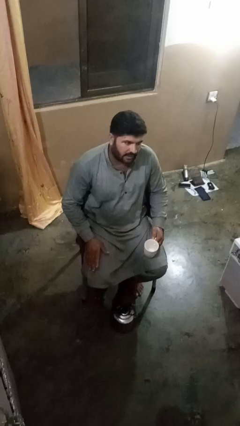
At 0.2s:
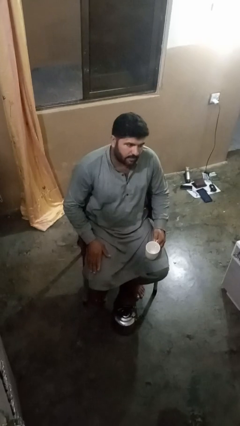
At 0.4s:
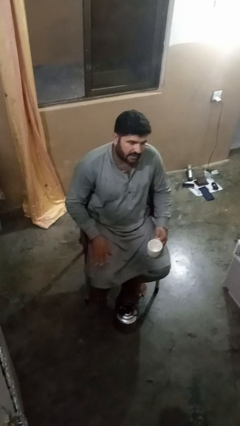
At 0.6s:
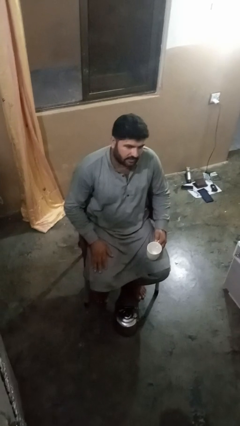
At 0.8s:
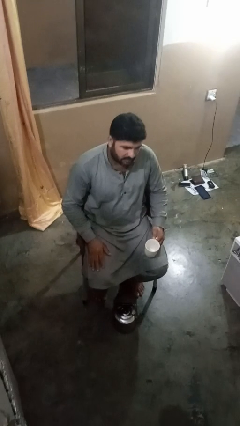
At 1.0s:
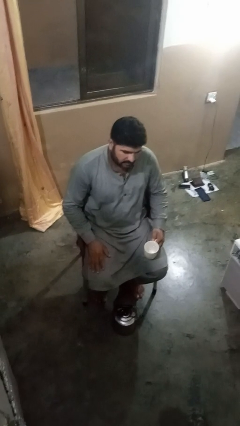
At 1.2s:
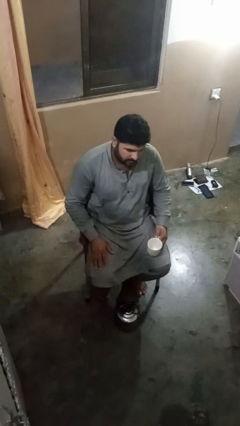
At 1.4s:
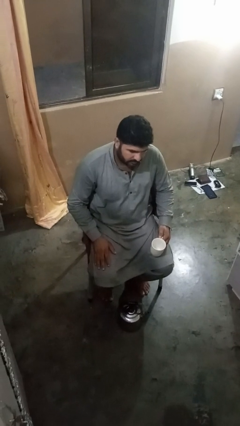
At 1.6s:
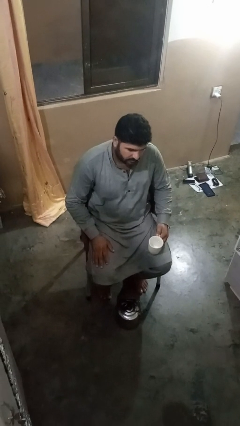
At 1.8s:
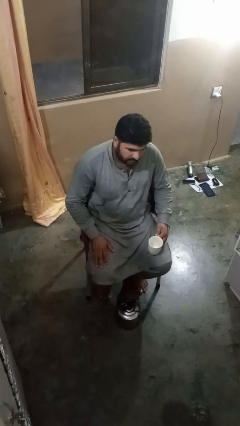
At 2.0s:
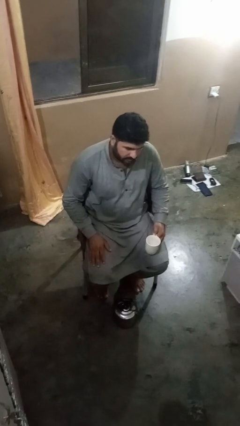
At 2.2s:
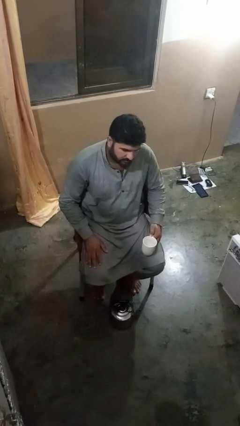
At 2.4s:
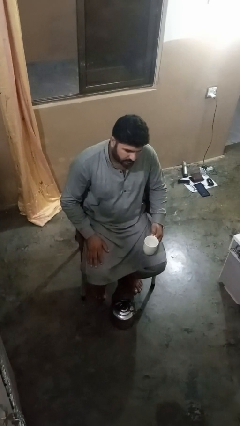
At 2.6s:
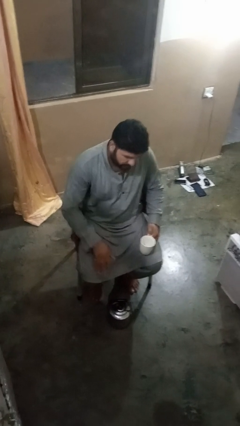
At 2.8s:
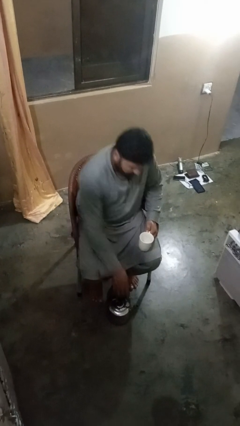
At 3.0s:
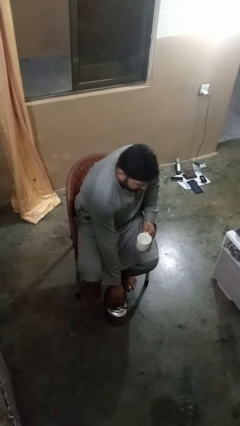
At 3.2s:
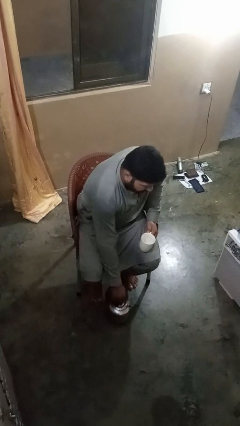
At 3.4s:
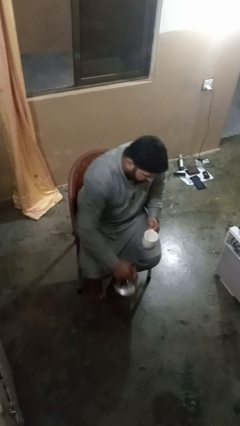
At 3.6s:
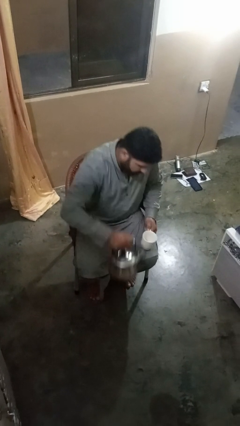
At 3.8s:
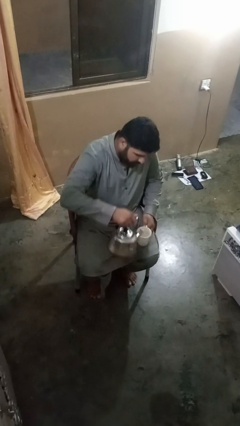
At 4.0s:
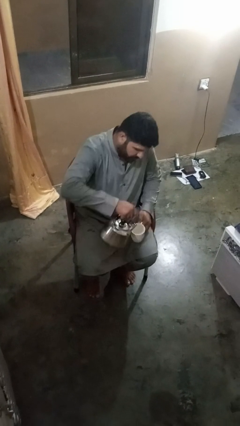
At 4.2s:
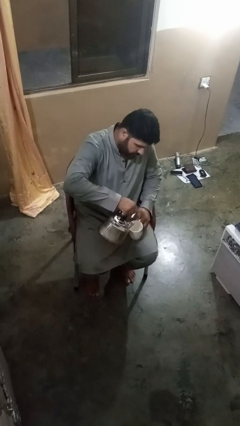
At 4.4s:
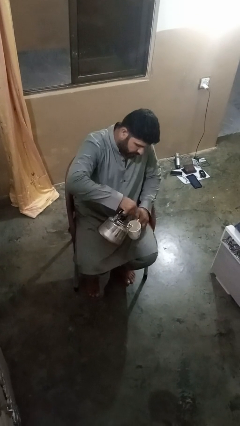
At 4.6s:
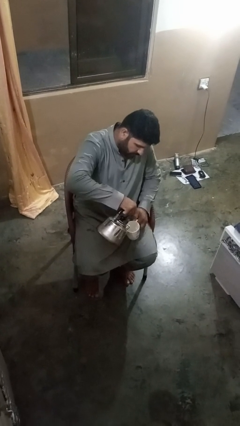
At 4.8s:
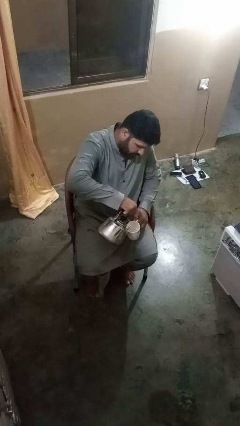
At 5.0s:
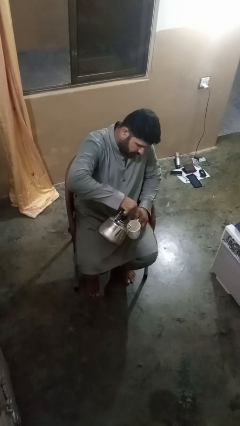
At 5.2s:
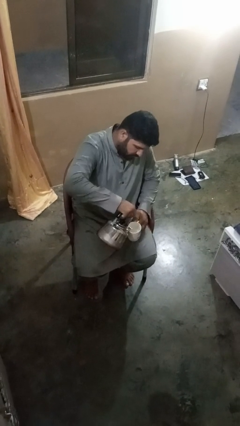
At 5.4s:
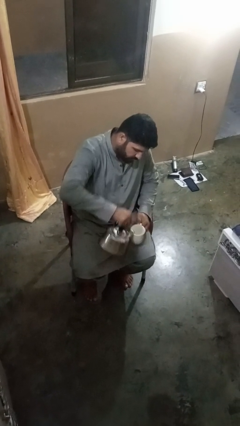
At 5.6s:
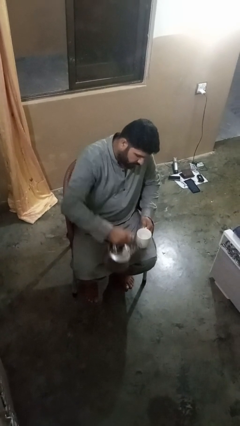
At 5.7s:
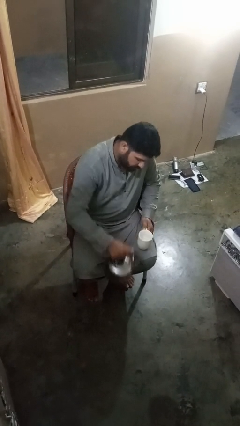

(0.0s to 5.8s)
person pours coffee into mug

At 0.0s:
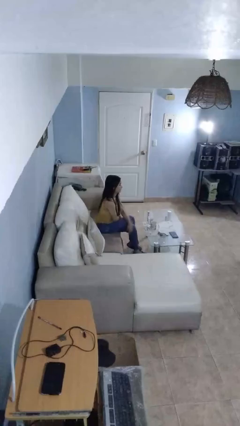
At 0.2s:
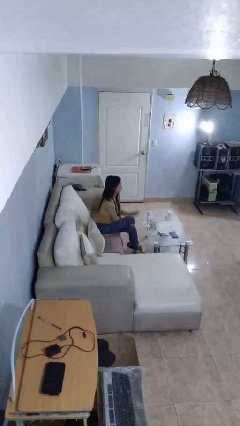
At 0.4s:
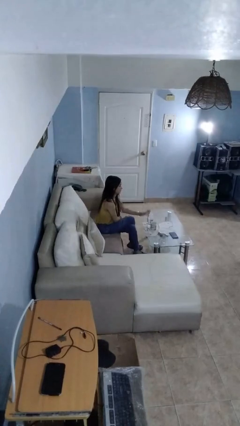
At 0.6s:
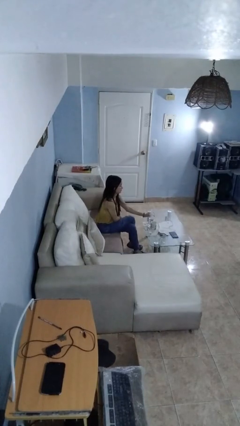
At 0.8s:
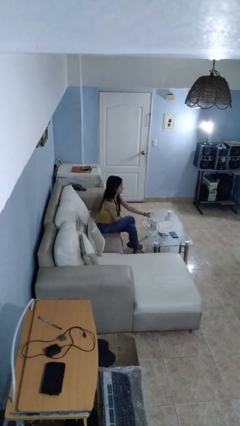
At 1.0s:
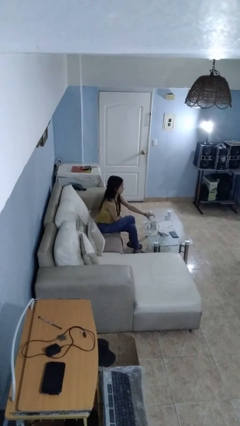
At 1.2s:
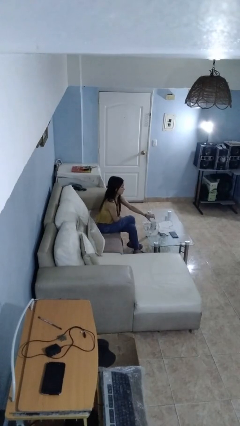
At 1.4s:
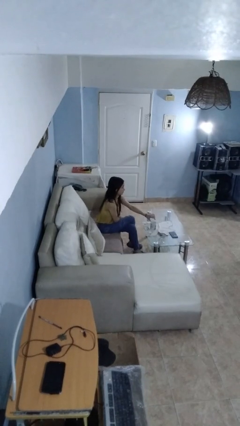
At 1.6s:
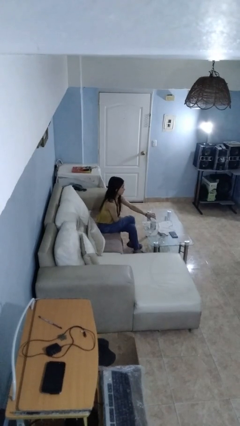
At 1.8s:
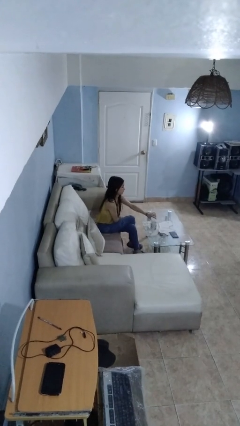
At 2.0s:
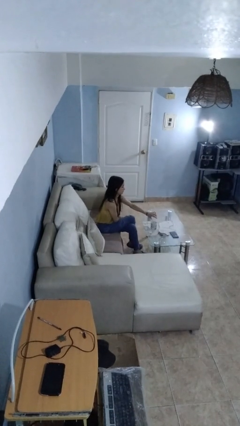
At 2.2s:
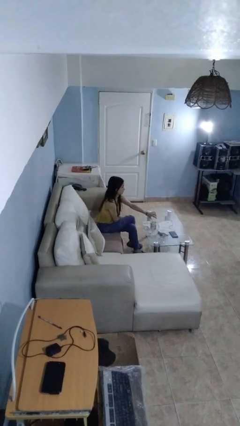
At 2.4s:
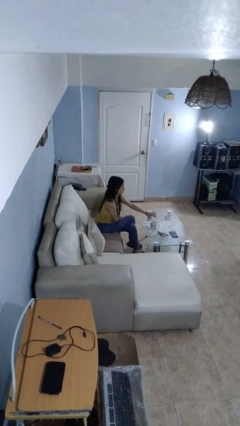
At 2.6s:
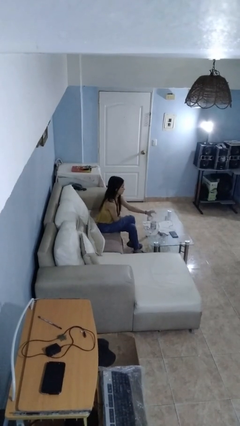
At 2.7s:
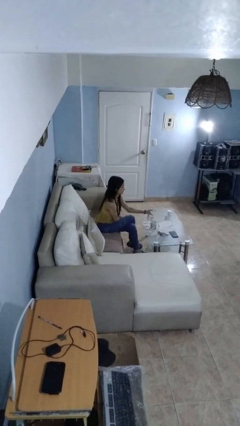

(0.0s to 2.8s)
person pours liquid into cup

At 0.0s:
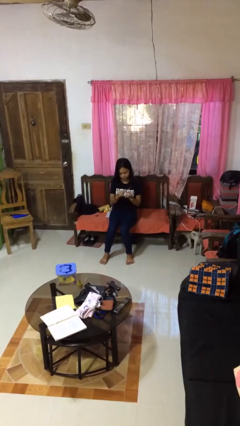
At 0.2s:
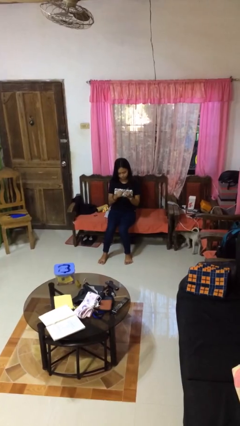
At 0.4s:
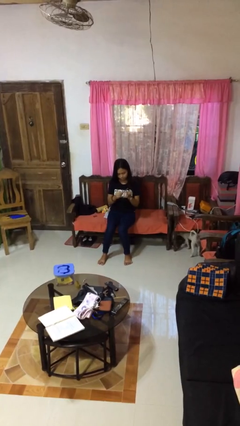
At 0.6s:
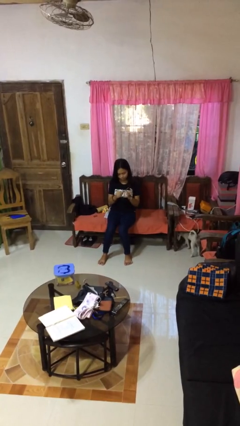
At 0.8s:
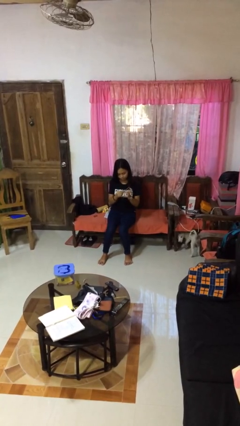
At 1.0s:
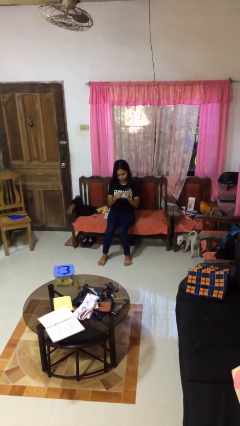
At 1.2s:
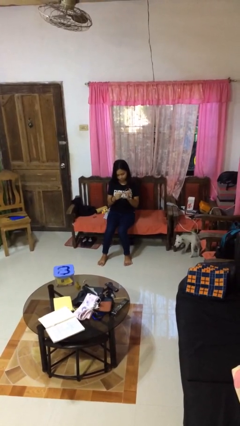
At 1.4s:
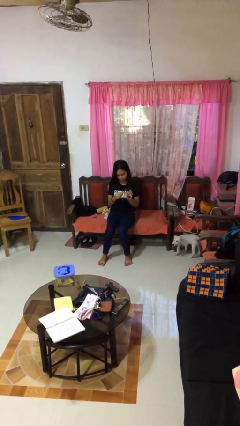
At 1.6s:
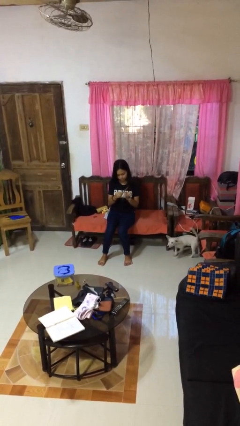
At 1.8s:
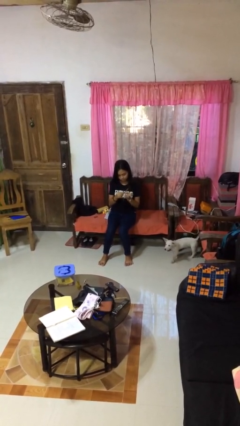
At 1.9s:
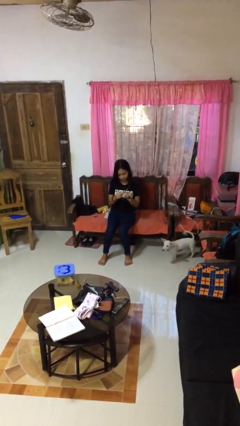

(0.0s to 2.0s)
person files fingernails

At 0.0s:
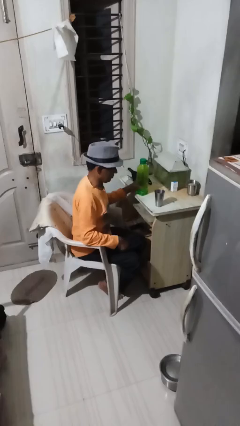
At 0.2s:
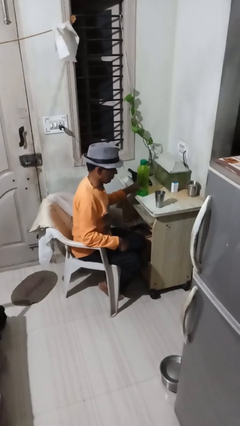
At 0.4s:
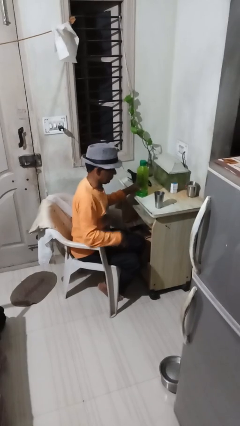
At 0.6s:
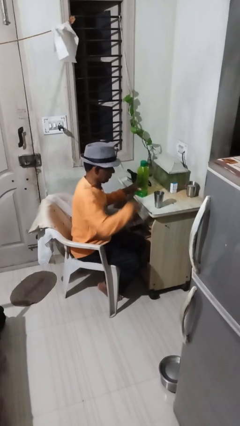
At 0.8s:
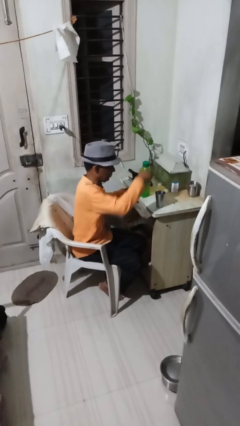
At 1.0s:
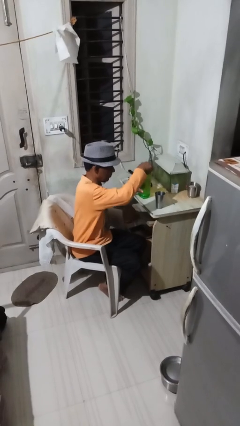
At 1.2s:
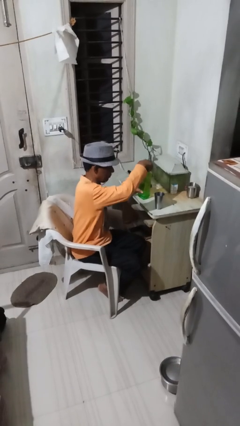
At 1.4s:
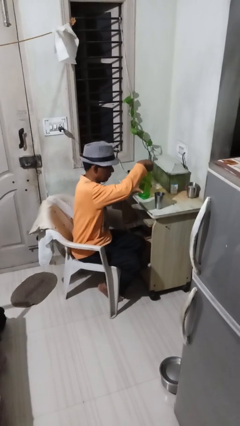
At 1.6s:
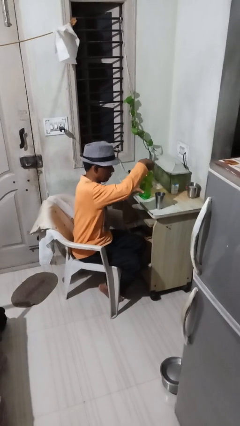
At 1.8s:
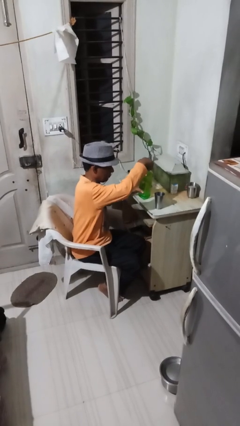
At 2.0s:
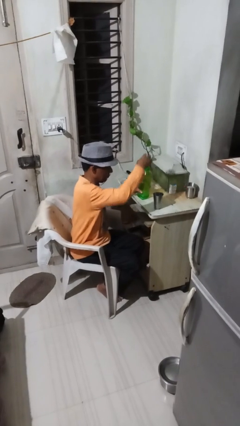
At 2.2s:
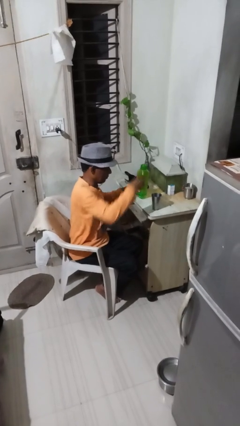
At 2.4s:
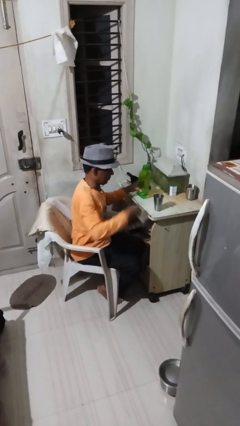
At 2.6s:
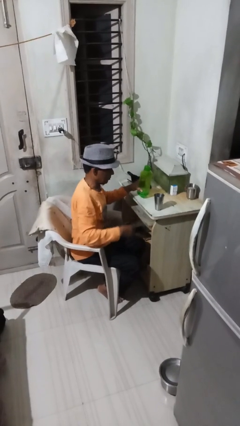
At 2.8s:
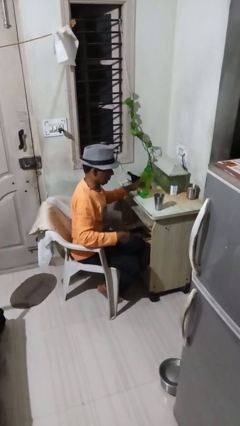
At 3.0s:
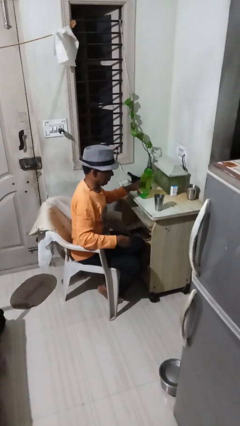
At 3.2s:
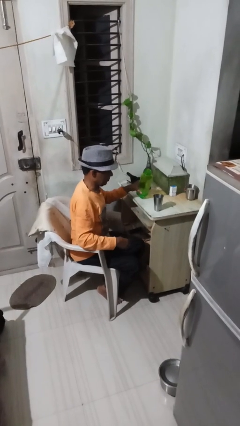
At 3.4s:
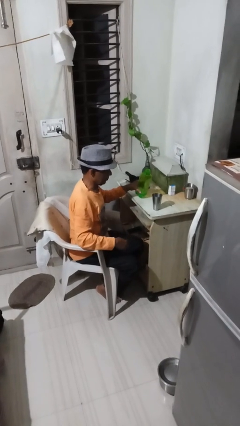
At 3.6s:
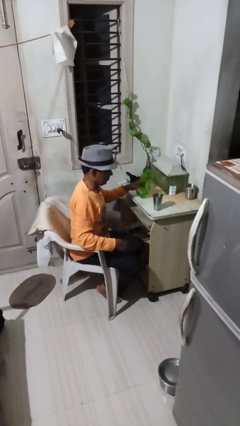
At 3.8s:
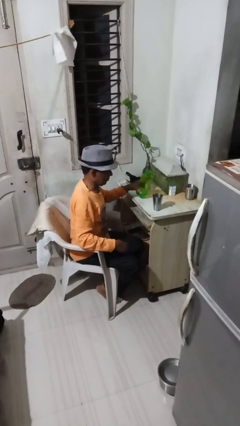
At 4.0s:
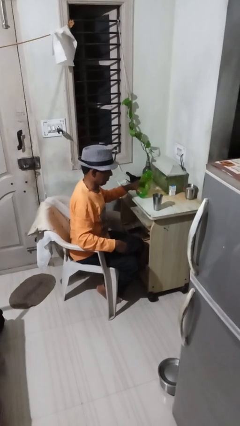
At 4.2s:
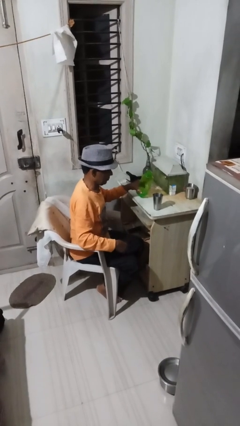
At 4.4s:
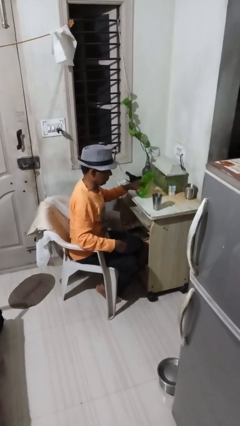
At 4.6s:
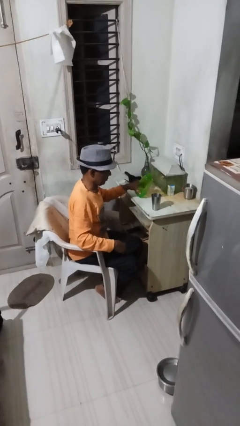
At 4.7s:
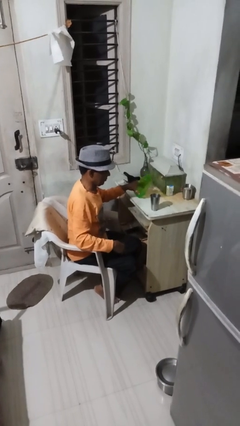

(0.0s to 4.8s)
person unscrews lid from bottle

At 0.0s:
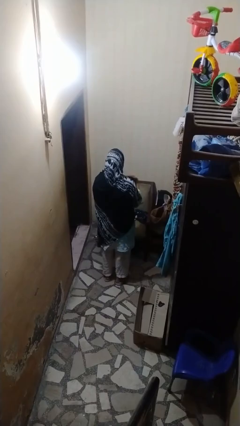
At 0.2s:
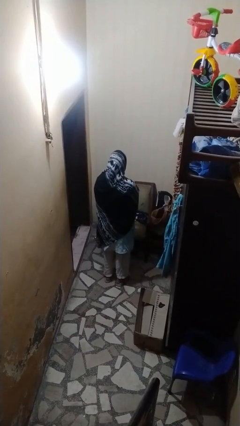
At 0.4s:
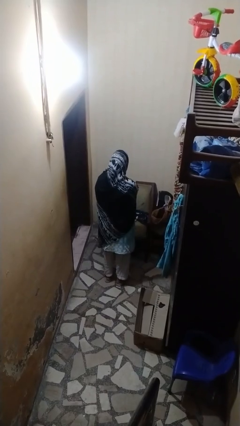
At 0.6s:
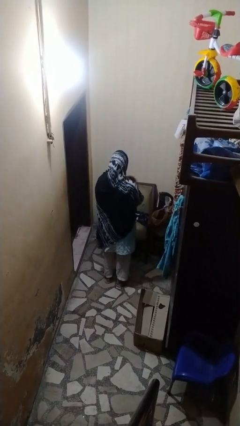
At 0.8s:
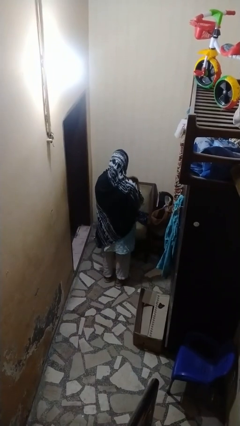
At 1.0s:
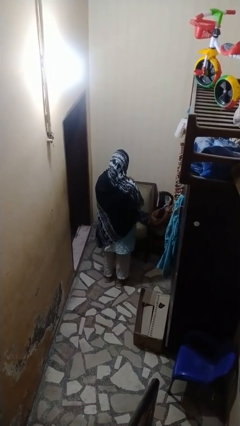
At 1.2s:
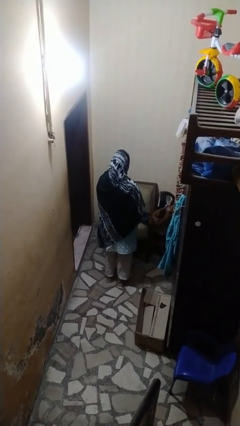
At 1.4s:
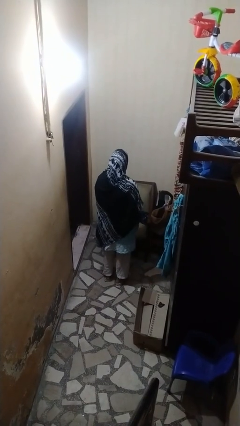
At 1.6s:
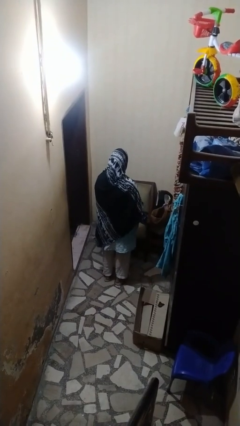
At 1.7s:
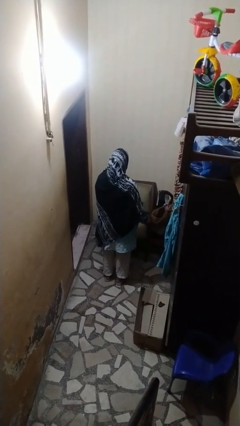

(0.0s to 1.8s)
person gestures cut

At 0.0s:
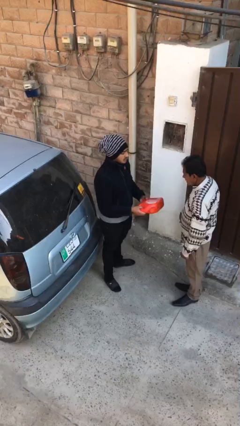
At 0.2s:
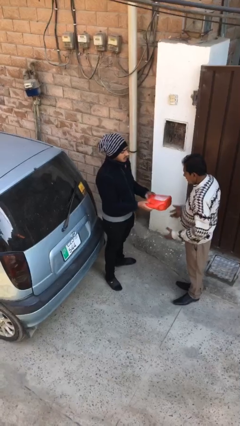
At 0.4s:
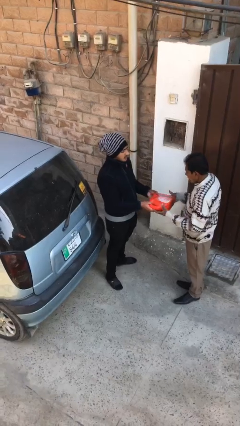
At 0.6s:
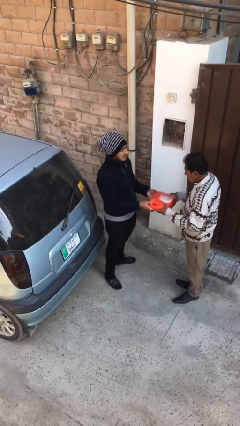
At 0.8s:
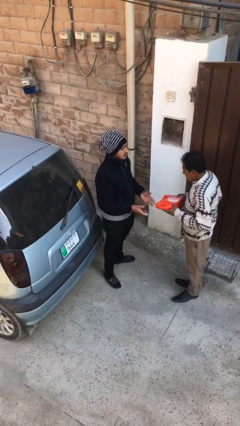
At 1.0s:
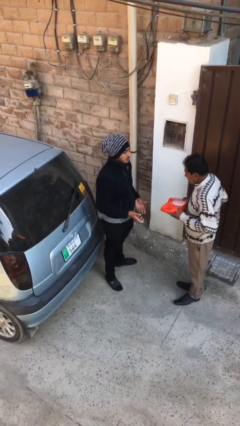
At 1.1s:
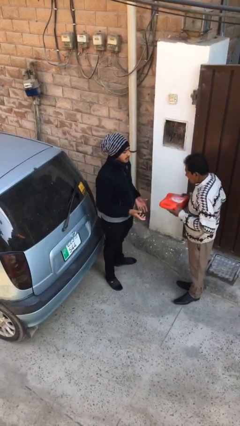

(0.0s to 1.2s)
person transfers object to person
